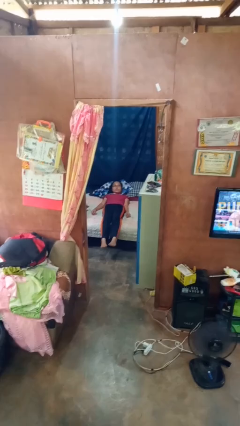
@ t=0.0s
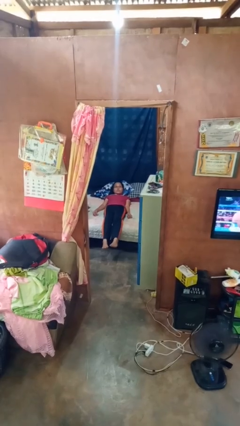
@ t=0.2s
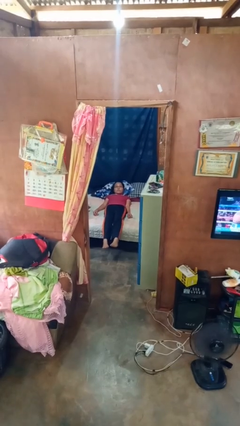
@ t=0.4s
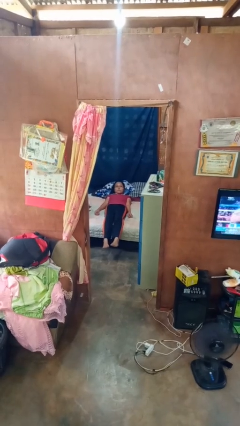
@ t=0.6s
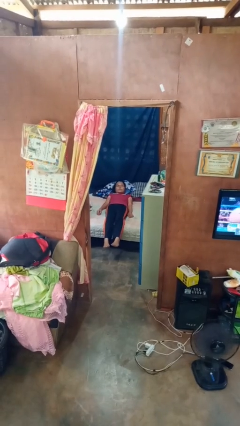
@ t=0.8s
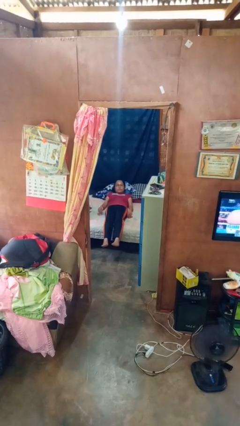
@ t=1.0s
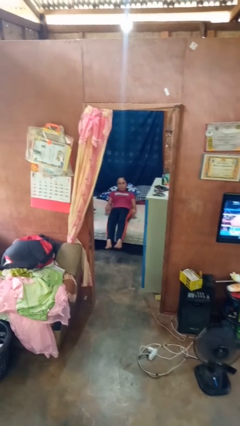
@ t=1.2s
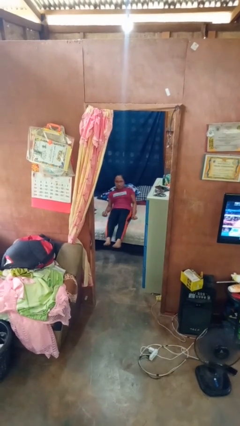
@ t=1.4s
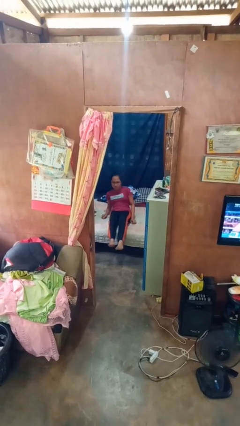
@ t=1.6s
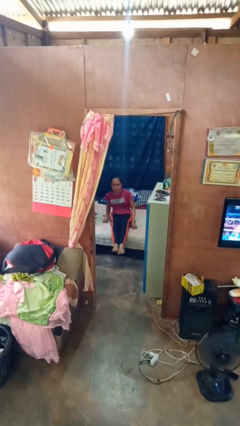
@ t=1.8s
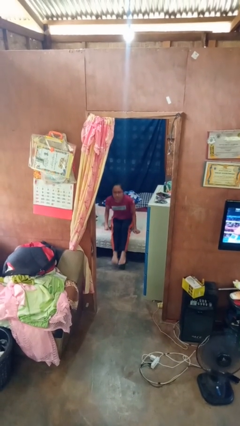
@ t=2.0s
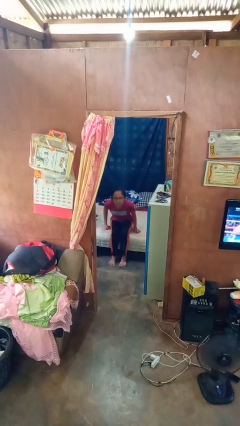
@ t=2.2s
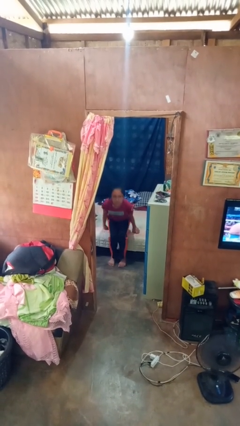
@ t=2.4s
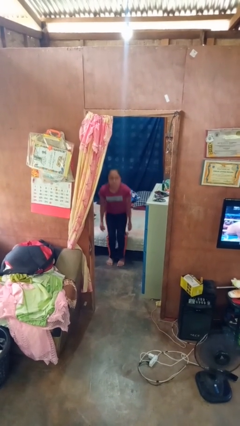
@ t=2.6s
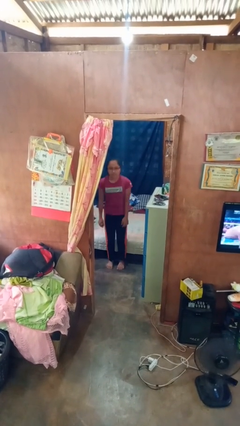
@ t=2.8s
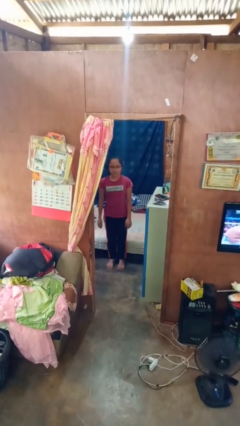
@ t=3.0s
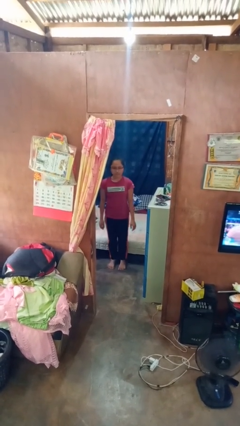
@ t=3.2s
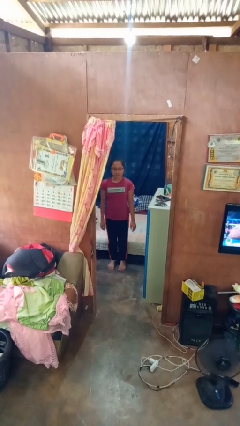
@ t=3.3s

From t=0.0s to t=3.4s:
person stands up

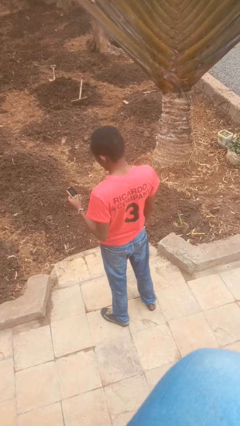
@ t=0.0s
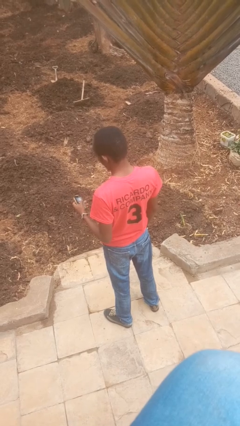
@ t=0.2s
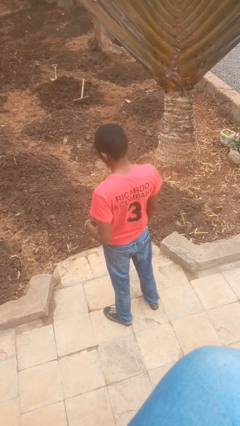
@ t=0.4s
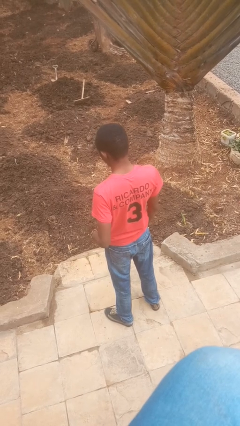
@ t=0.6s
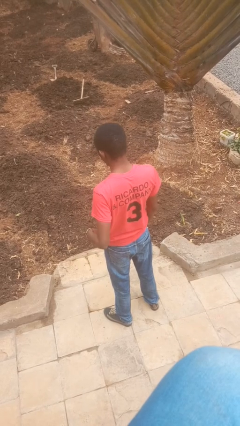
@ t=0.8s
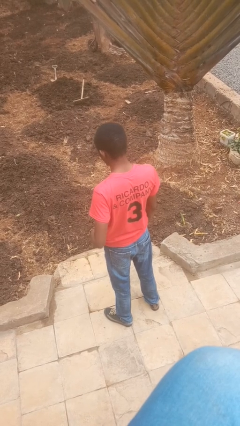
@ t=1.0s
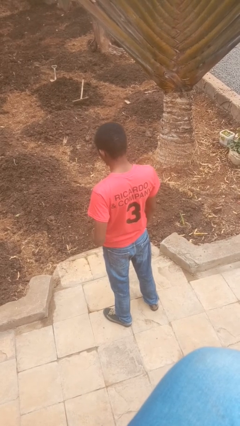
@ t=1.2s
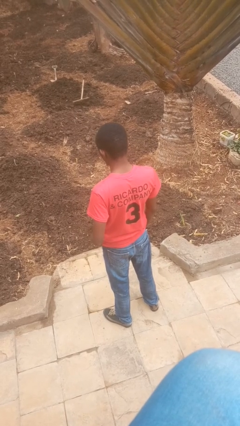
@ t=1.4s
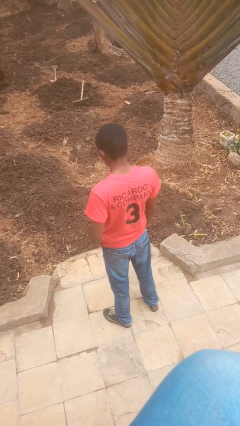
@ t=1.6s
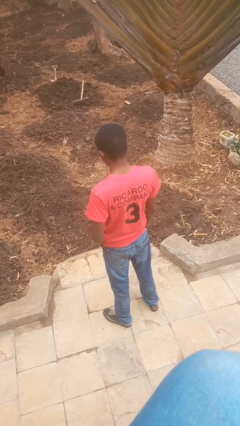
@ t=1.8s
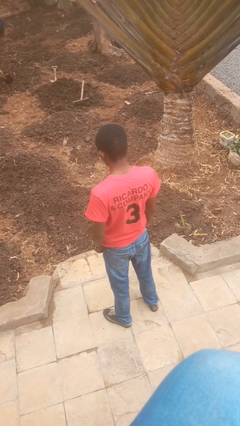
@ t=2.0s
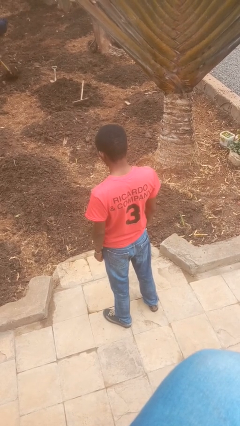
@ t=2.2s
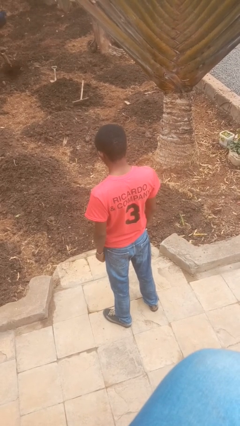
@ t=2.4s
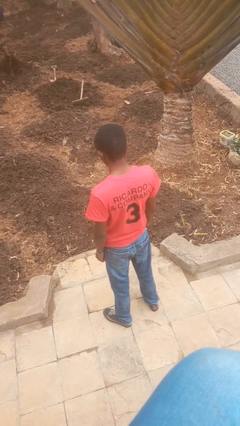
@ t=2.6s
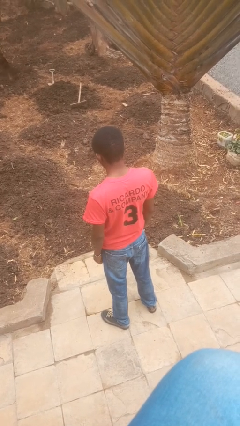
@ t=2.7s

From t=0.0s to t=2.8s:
person puts phone into pocket

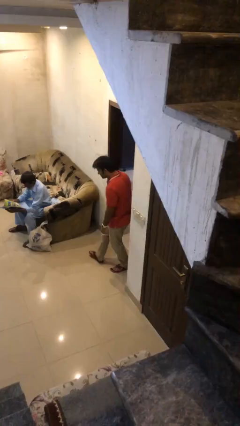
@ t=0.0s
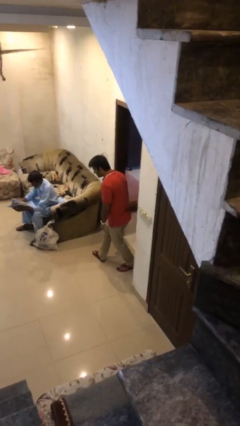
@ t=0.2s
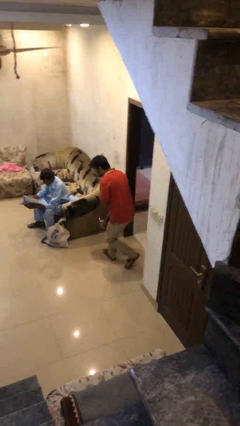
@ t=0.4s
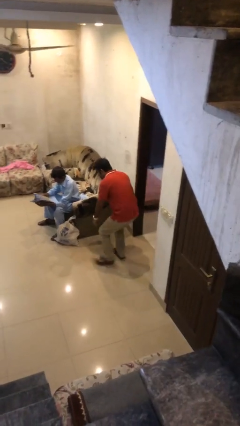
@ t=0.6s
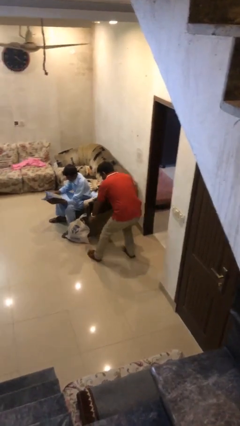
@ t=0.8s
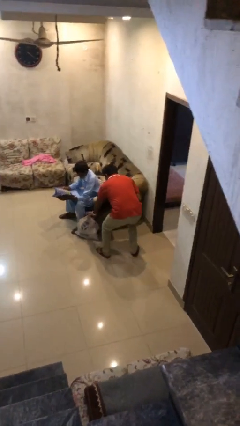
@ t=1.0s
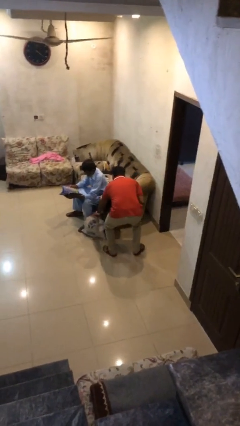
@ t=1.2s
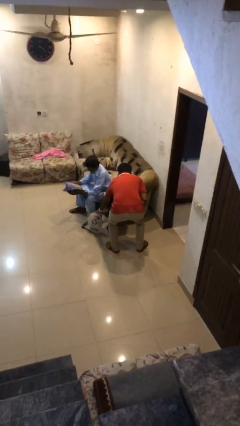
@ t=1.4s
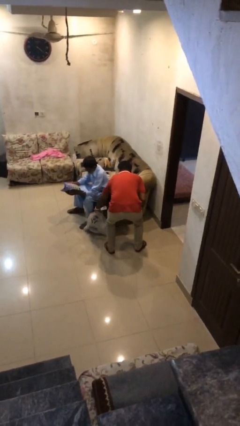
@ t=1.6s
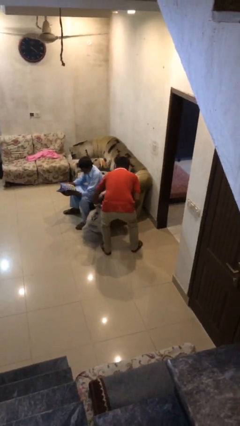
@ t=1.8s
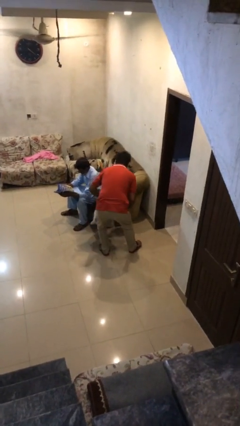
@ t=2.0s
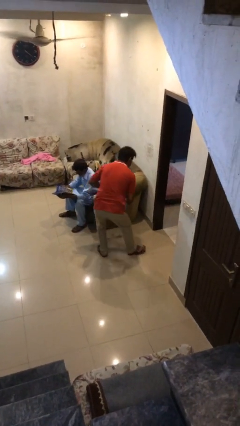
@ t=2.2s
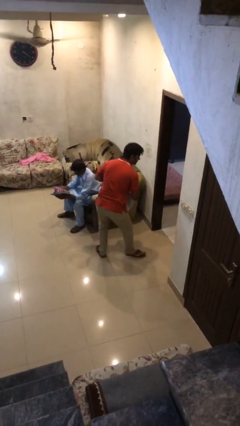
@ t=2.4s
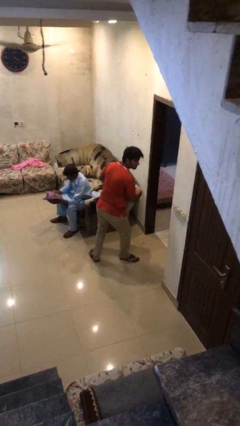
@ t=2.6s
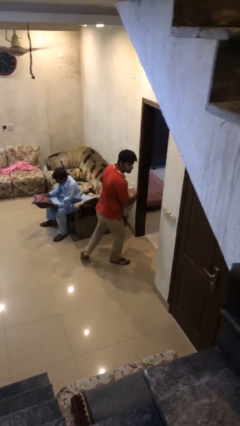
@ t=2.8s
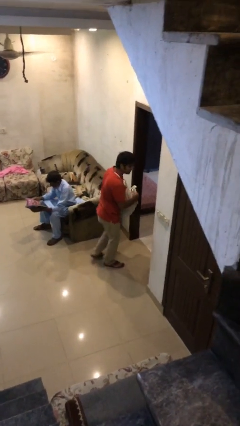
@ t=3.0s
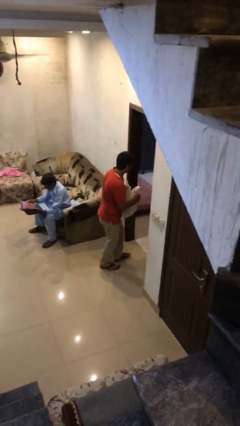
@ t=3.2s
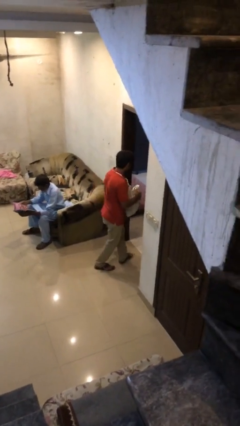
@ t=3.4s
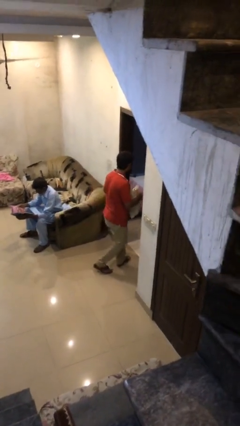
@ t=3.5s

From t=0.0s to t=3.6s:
person steals object from person

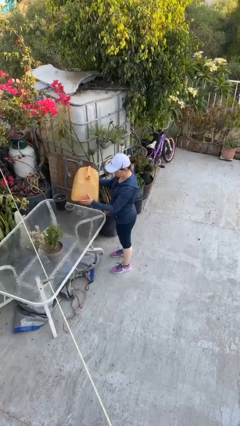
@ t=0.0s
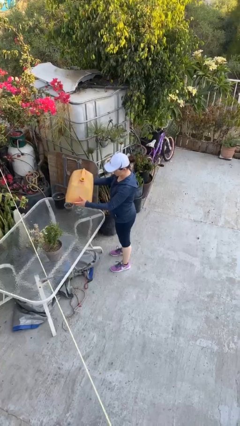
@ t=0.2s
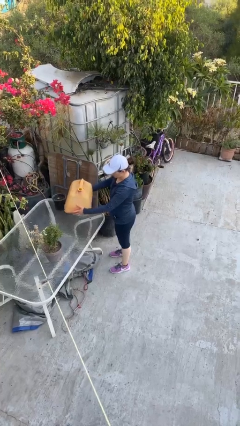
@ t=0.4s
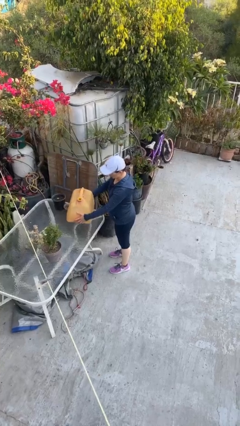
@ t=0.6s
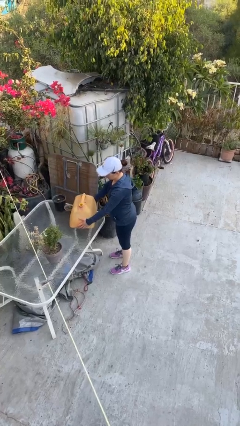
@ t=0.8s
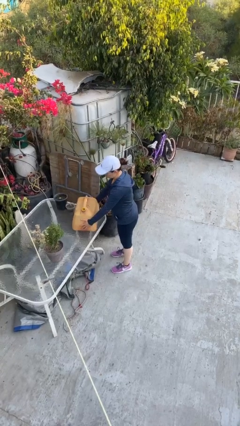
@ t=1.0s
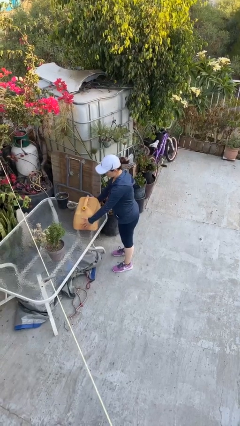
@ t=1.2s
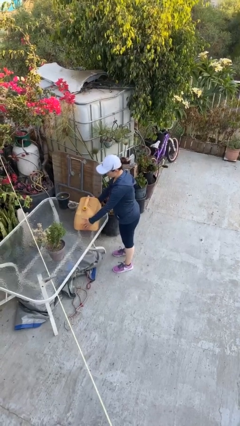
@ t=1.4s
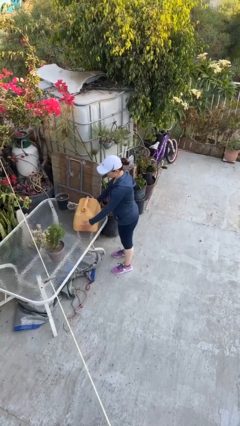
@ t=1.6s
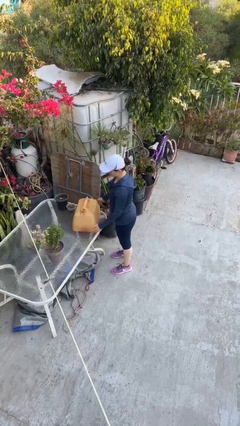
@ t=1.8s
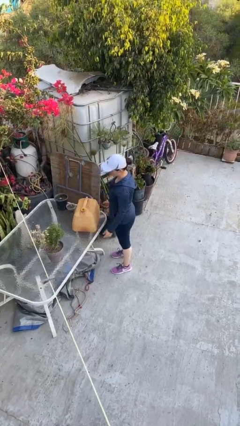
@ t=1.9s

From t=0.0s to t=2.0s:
person puts down object on table

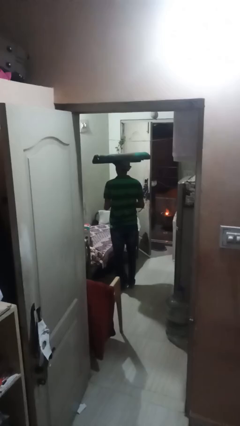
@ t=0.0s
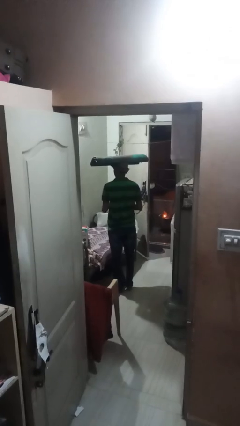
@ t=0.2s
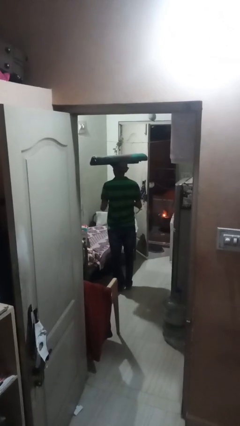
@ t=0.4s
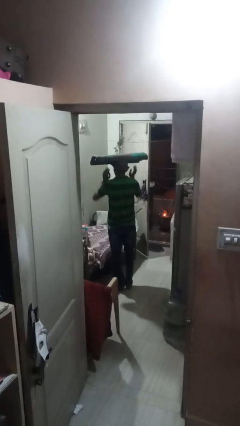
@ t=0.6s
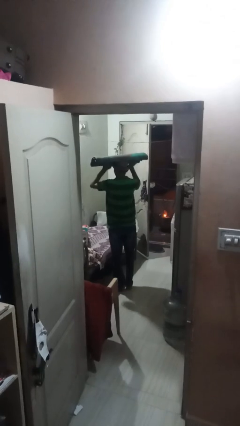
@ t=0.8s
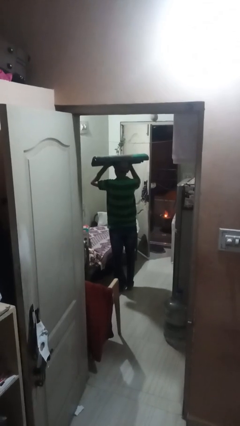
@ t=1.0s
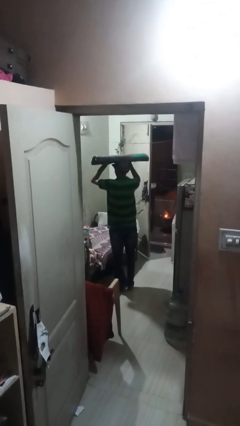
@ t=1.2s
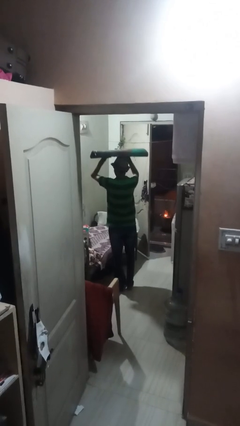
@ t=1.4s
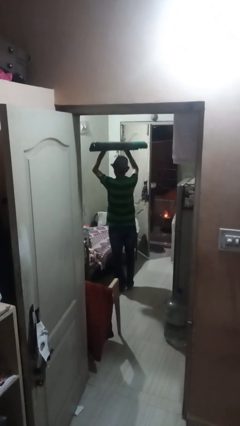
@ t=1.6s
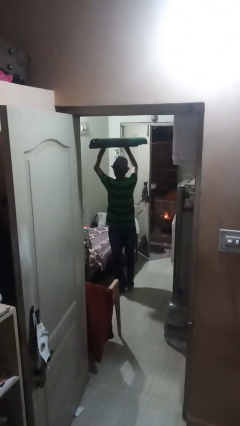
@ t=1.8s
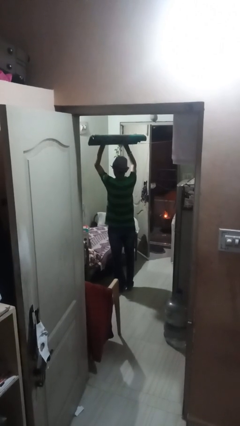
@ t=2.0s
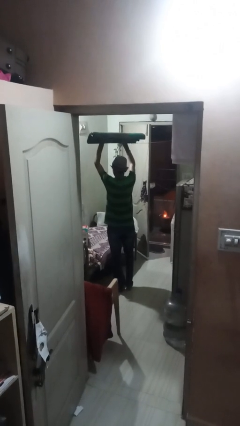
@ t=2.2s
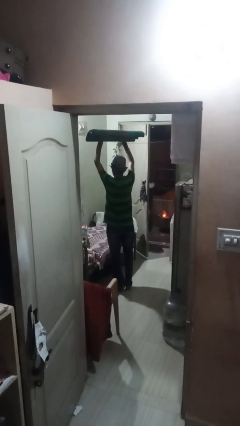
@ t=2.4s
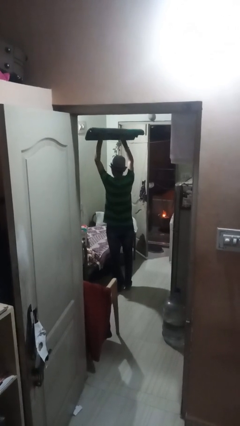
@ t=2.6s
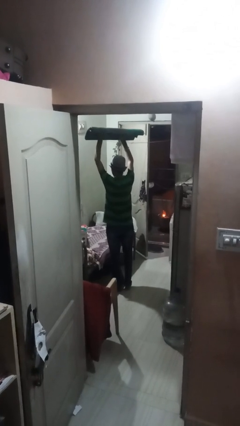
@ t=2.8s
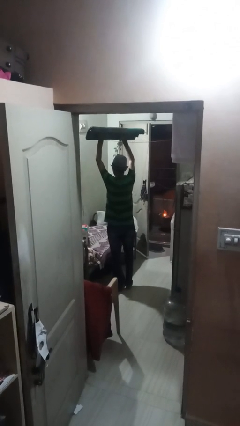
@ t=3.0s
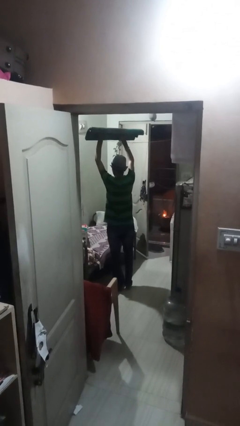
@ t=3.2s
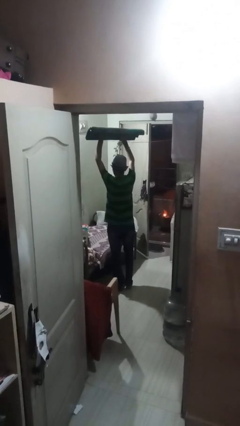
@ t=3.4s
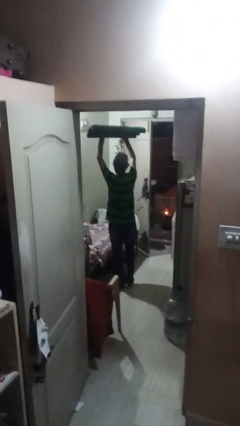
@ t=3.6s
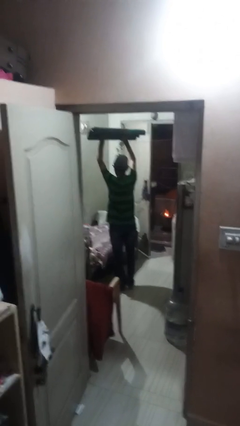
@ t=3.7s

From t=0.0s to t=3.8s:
person holds object above head

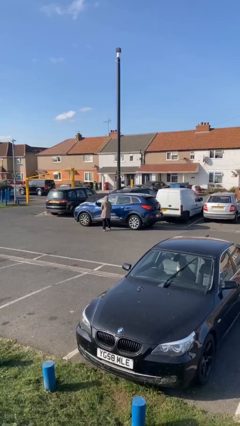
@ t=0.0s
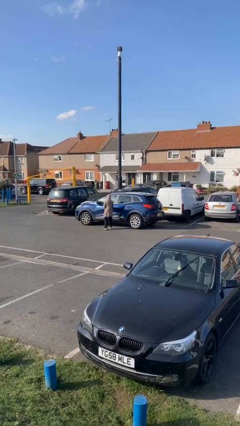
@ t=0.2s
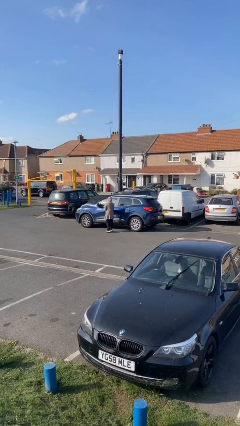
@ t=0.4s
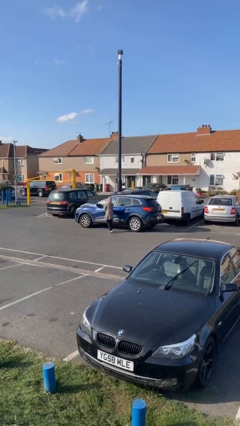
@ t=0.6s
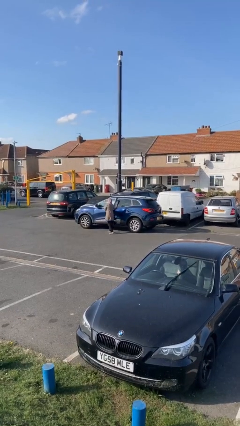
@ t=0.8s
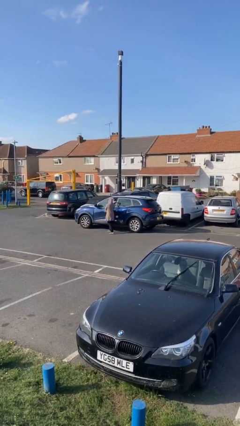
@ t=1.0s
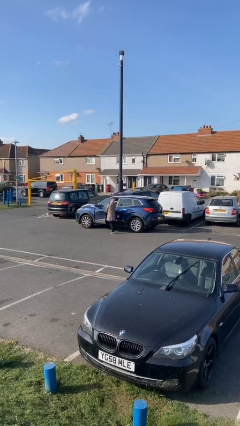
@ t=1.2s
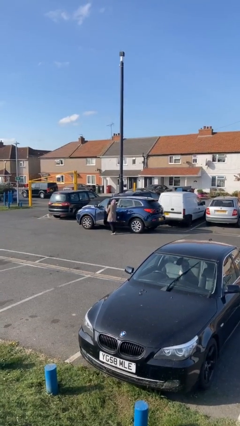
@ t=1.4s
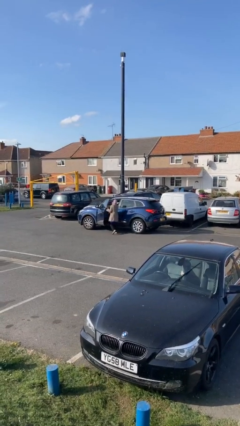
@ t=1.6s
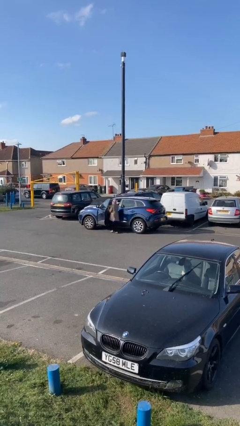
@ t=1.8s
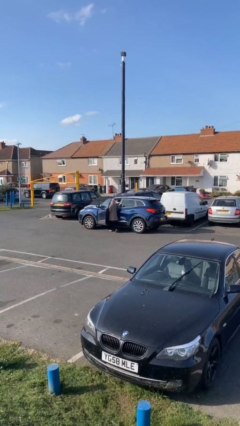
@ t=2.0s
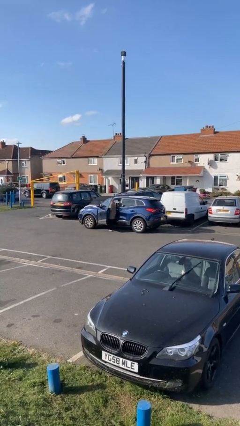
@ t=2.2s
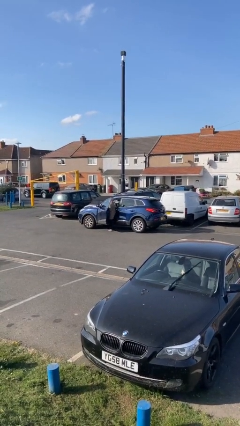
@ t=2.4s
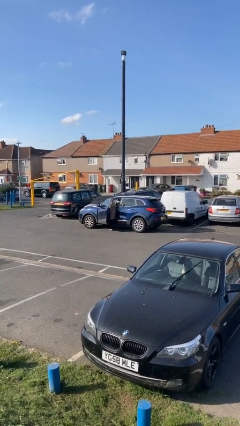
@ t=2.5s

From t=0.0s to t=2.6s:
car picks up person
